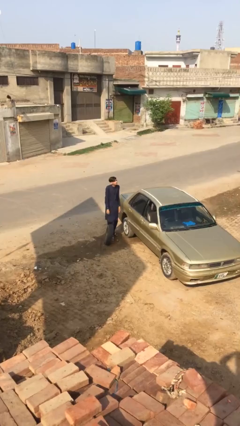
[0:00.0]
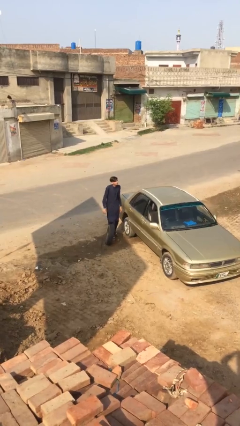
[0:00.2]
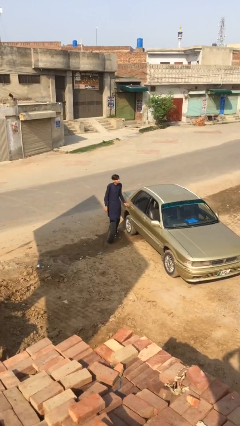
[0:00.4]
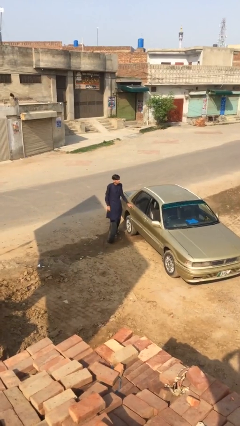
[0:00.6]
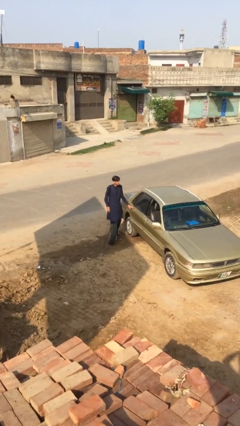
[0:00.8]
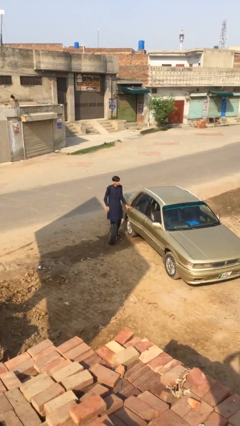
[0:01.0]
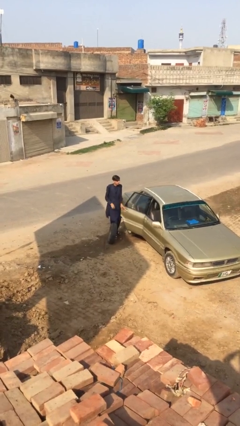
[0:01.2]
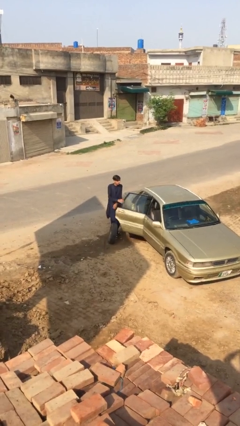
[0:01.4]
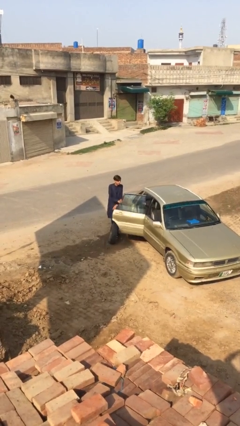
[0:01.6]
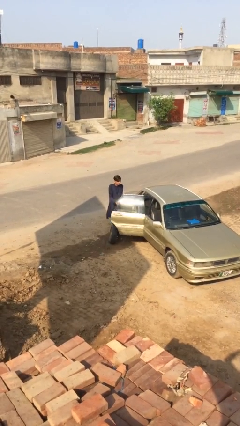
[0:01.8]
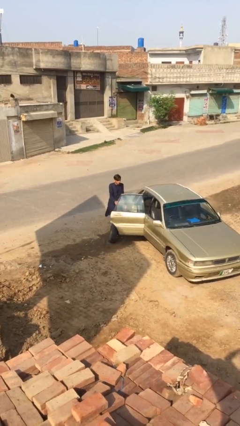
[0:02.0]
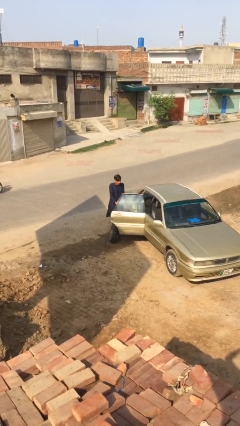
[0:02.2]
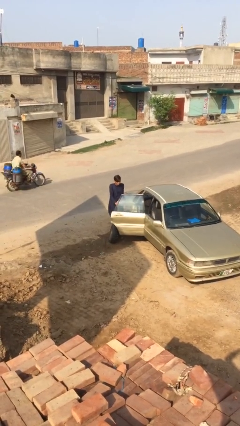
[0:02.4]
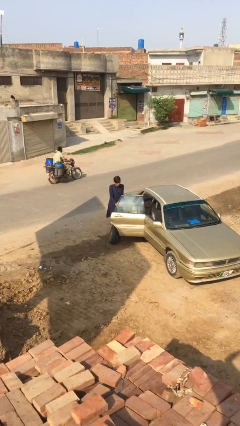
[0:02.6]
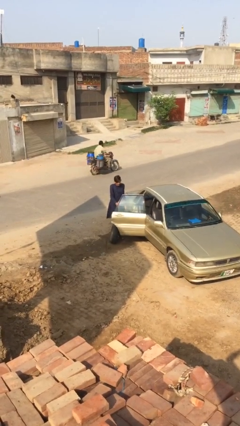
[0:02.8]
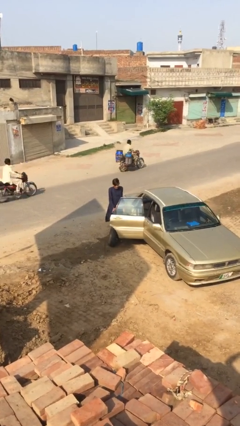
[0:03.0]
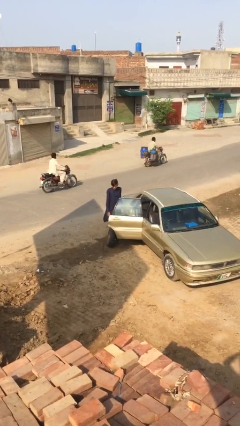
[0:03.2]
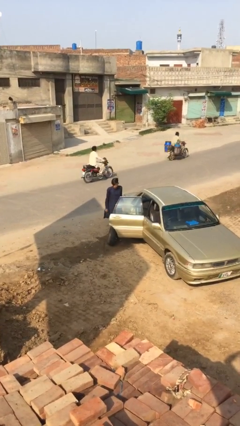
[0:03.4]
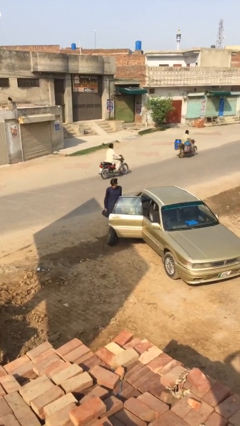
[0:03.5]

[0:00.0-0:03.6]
person opens car door

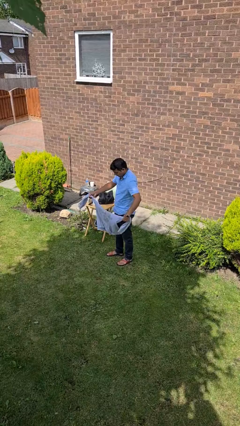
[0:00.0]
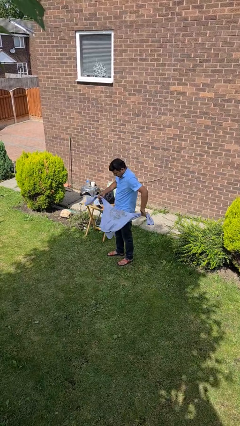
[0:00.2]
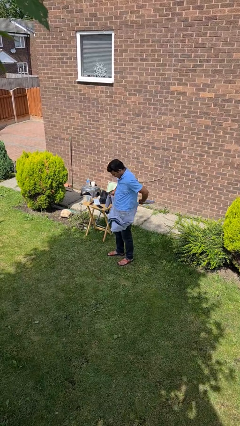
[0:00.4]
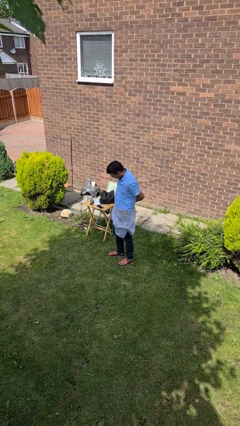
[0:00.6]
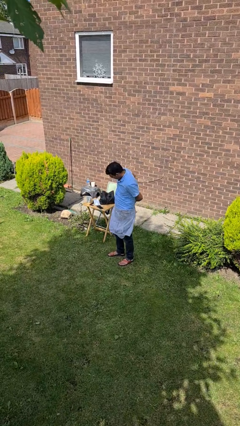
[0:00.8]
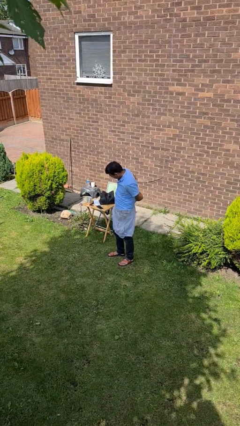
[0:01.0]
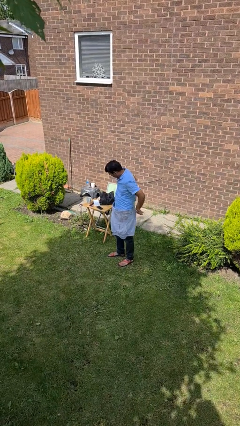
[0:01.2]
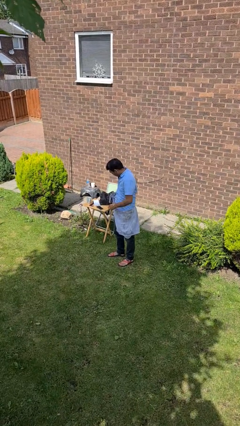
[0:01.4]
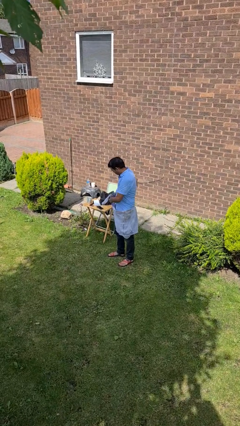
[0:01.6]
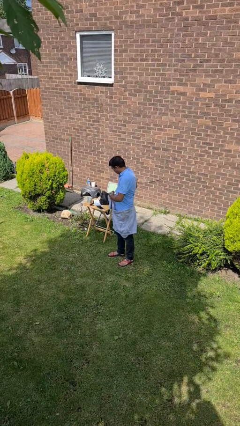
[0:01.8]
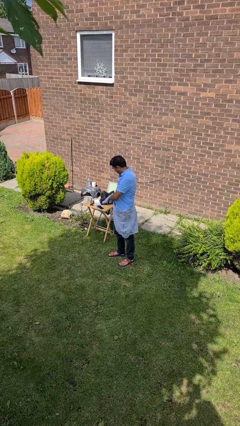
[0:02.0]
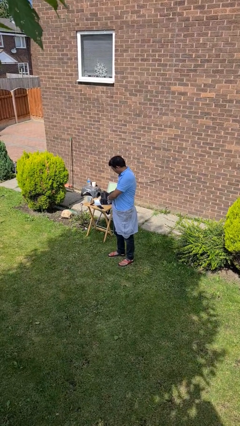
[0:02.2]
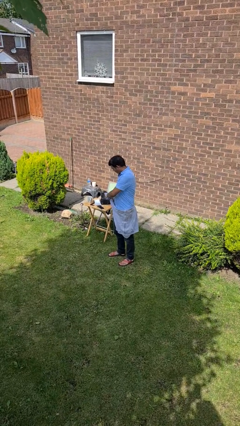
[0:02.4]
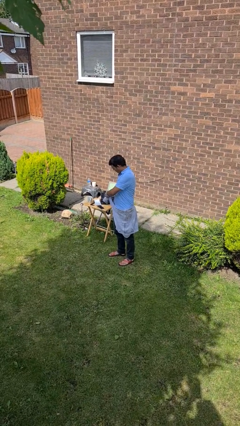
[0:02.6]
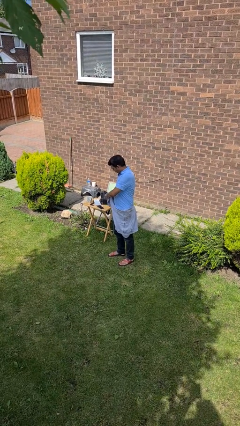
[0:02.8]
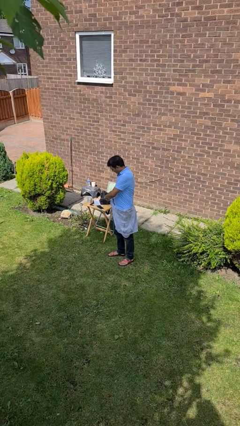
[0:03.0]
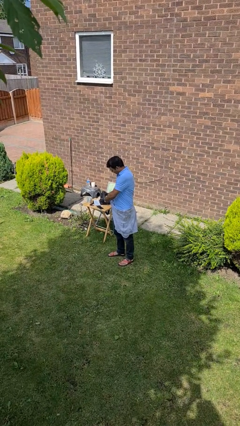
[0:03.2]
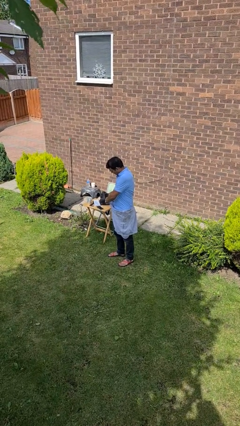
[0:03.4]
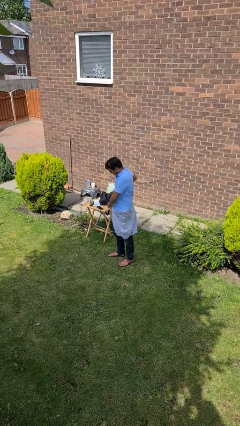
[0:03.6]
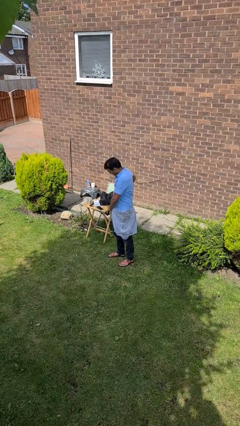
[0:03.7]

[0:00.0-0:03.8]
person ties jacket around waist

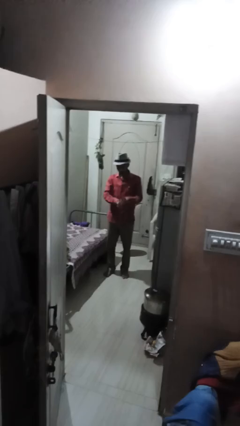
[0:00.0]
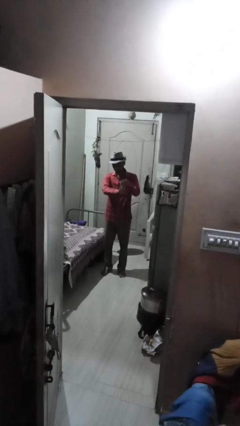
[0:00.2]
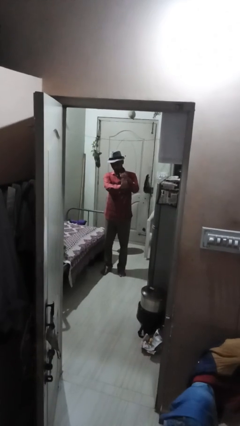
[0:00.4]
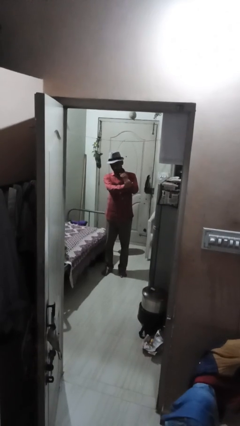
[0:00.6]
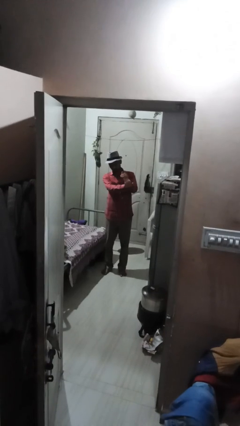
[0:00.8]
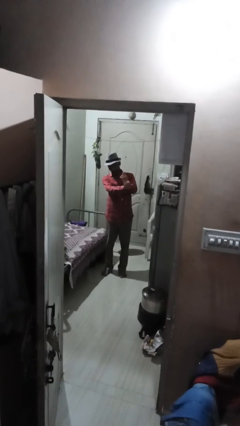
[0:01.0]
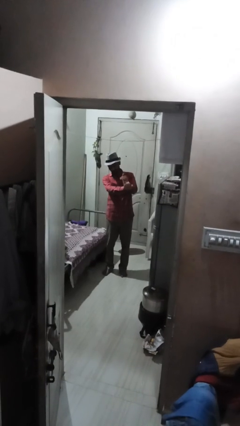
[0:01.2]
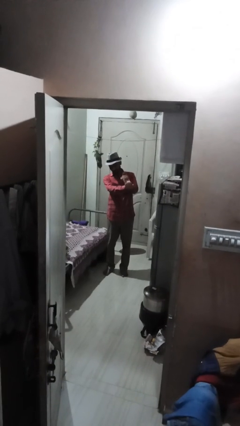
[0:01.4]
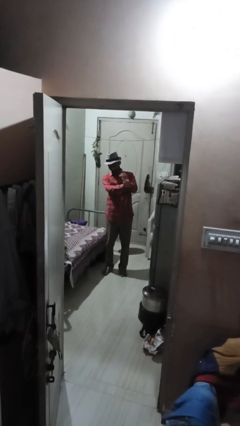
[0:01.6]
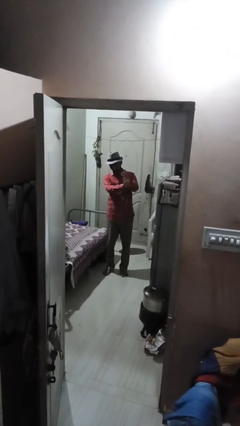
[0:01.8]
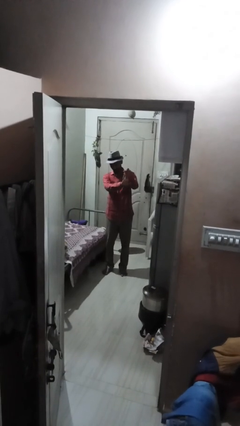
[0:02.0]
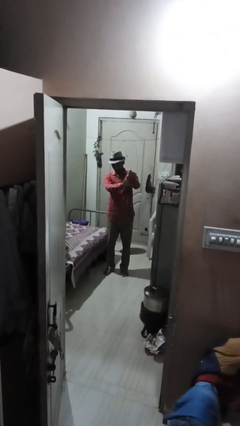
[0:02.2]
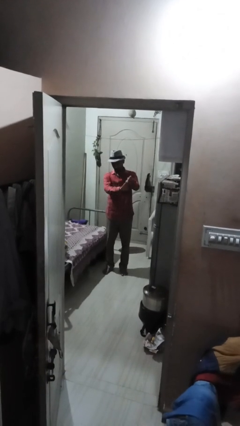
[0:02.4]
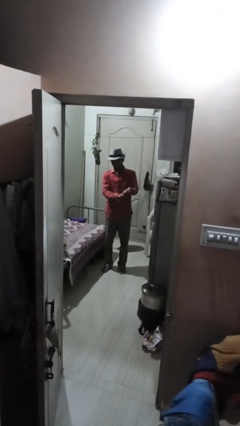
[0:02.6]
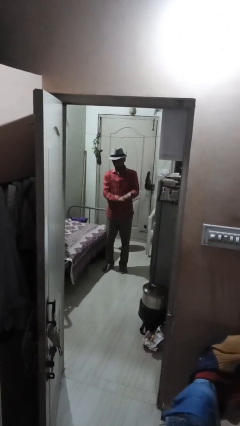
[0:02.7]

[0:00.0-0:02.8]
person cracks knuckles

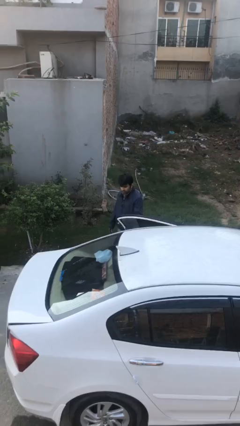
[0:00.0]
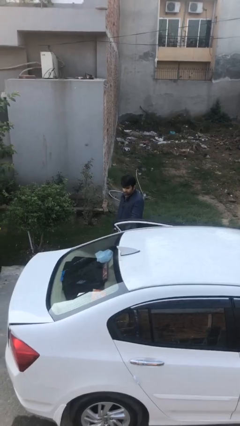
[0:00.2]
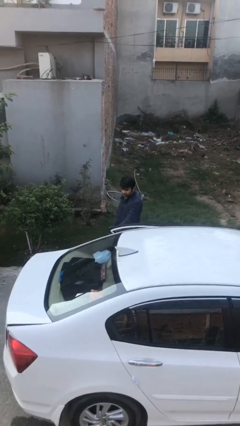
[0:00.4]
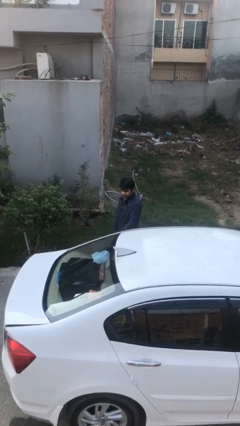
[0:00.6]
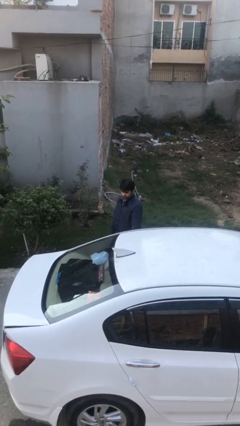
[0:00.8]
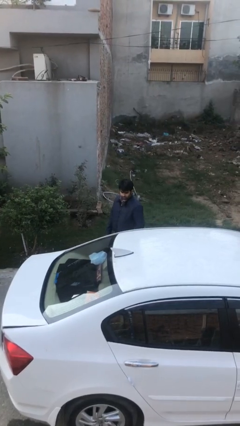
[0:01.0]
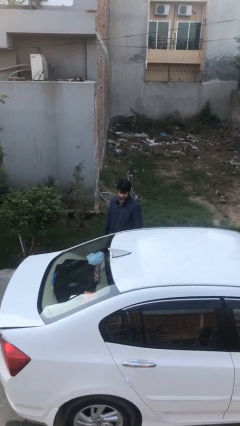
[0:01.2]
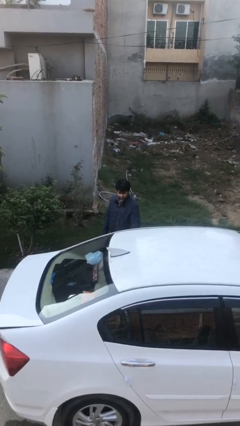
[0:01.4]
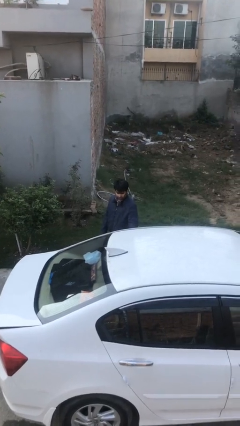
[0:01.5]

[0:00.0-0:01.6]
person closes car door

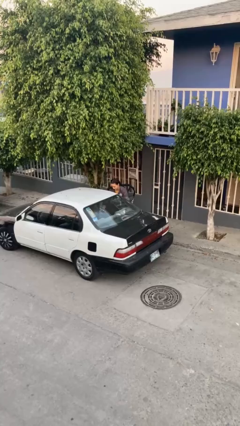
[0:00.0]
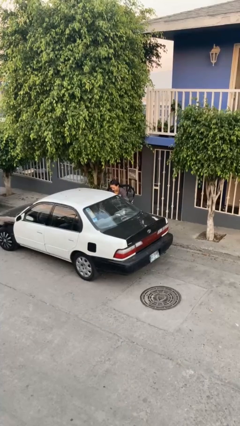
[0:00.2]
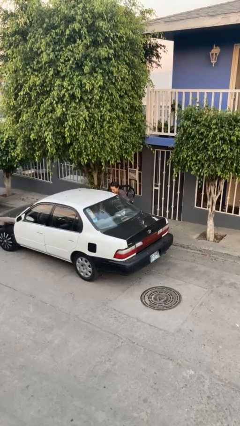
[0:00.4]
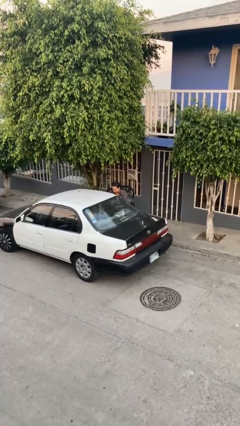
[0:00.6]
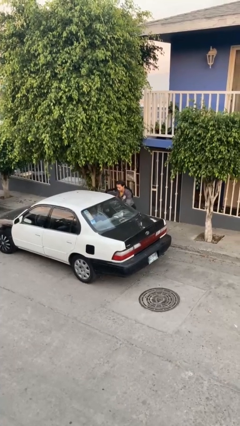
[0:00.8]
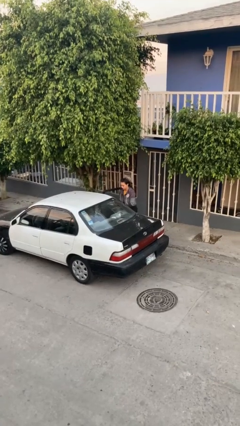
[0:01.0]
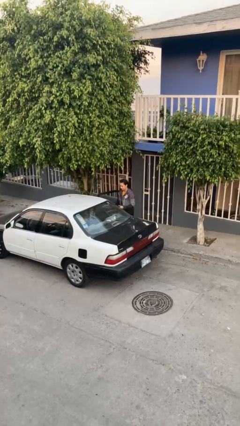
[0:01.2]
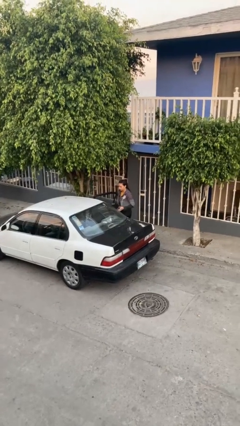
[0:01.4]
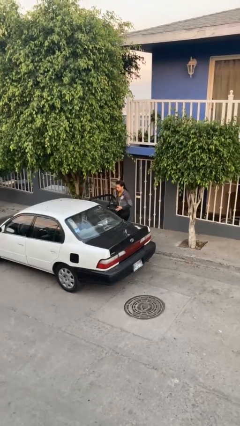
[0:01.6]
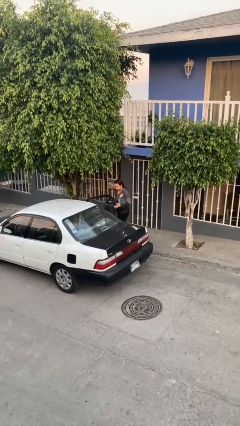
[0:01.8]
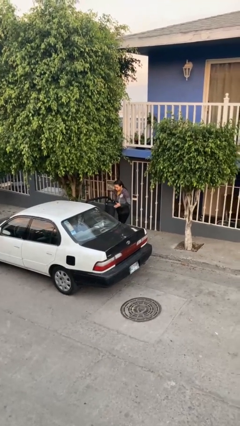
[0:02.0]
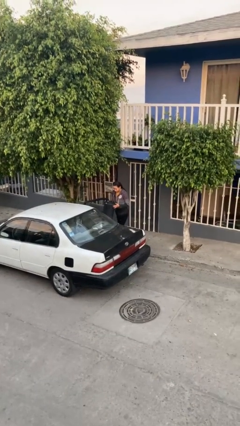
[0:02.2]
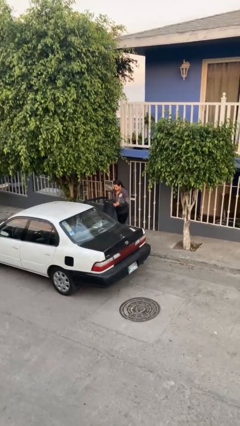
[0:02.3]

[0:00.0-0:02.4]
person unloads car

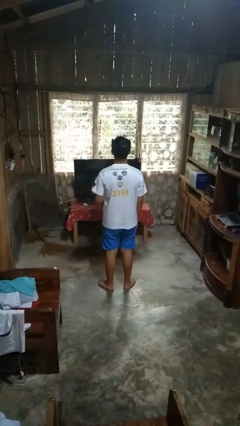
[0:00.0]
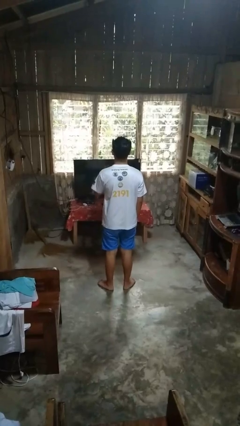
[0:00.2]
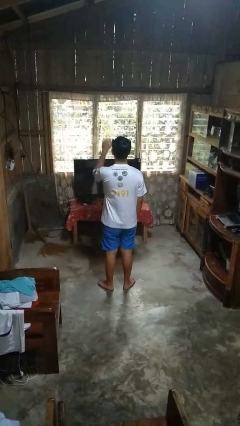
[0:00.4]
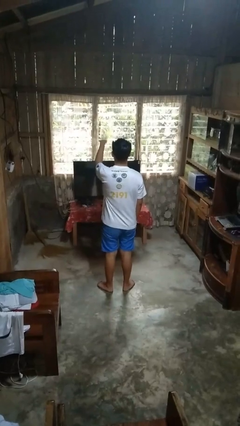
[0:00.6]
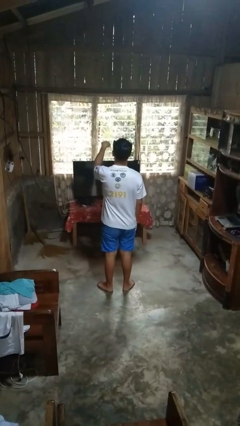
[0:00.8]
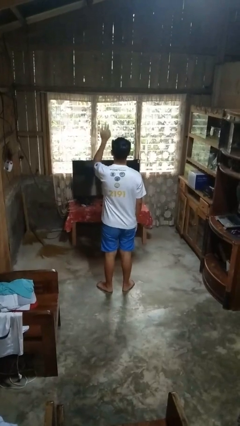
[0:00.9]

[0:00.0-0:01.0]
person gestures come here

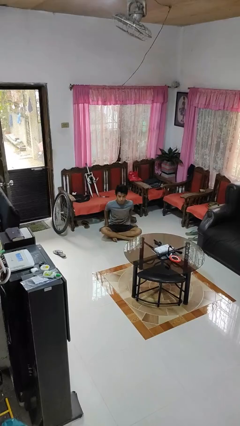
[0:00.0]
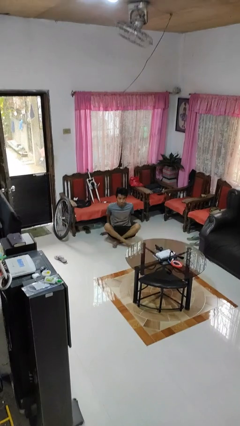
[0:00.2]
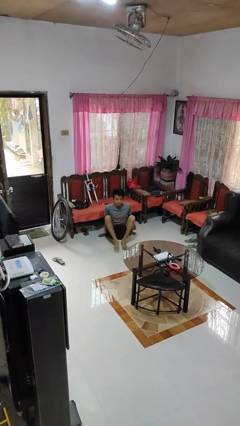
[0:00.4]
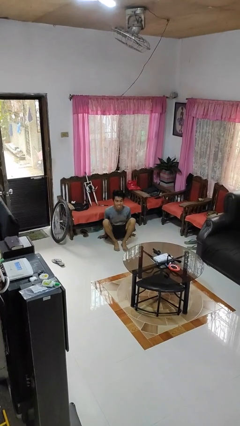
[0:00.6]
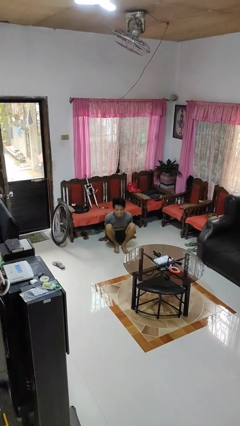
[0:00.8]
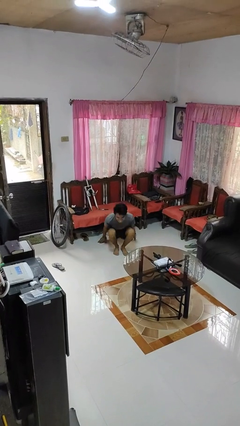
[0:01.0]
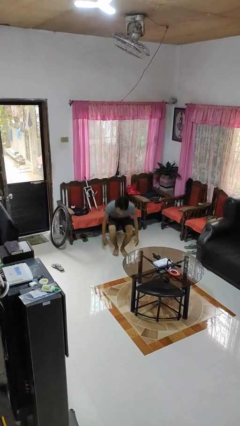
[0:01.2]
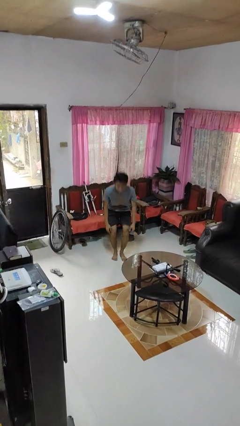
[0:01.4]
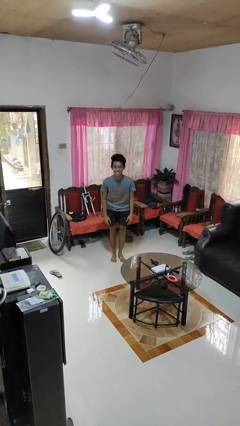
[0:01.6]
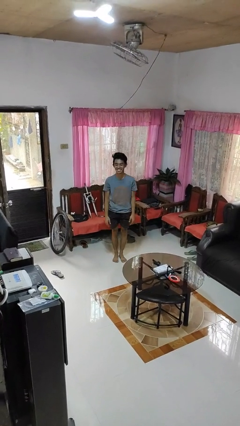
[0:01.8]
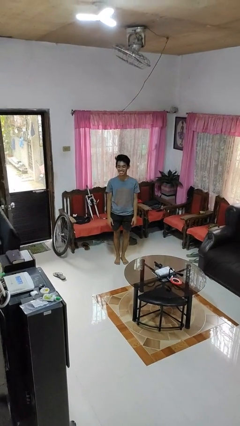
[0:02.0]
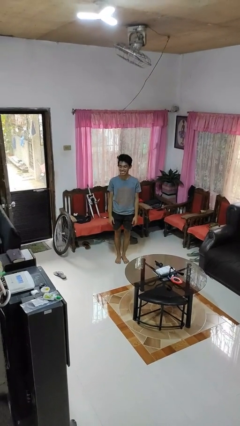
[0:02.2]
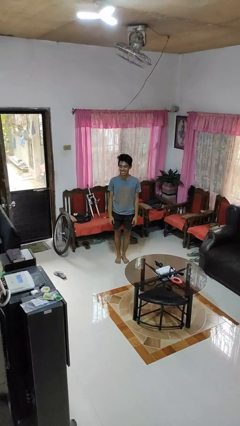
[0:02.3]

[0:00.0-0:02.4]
person stands up from floor
